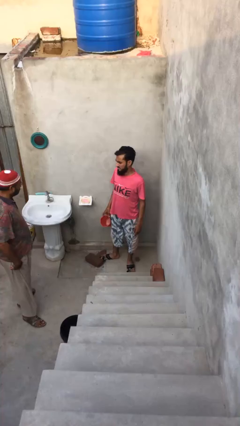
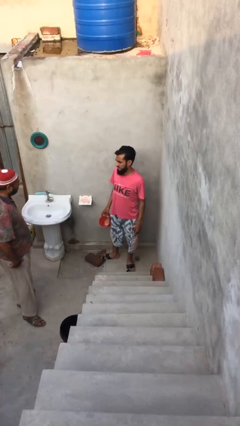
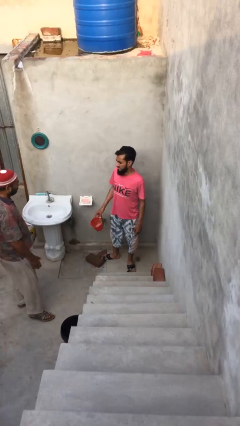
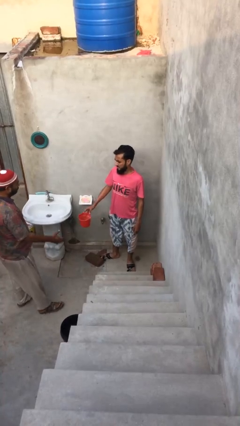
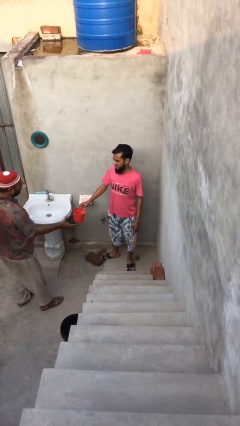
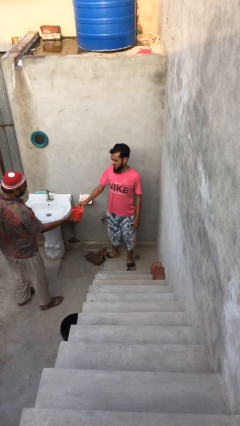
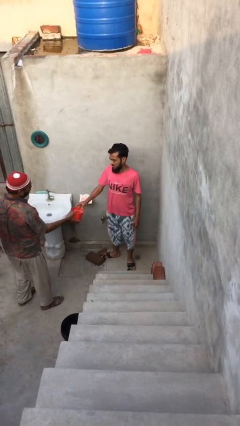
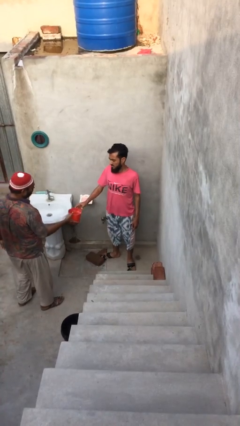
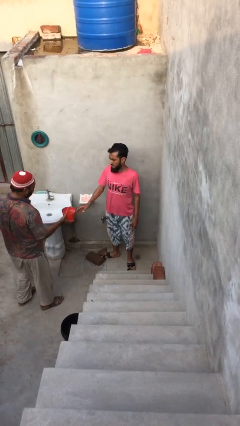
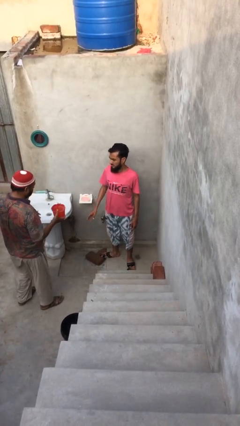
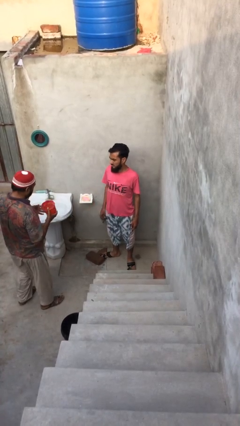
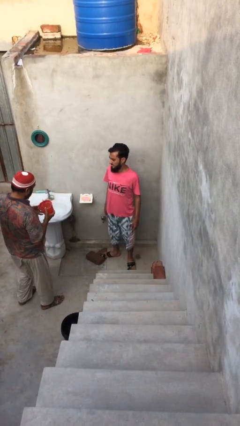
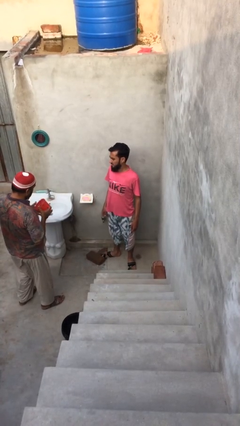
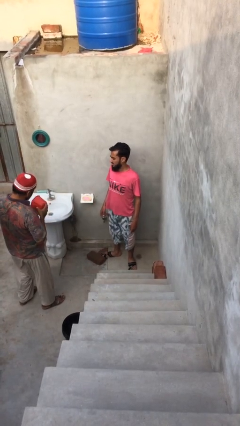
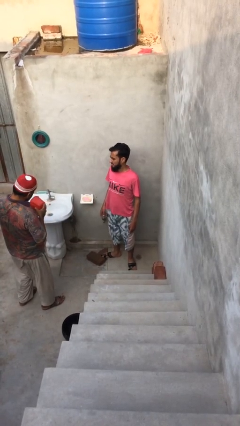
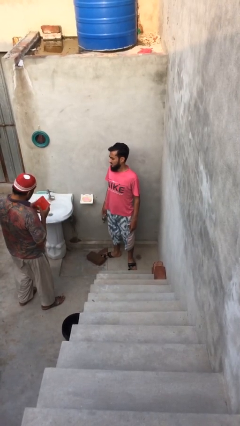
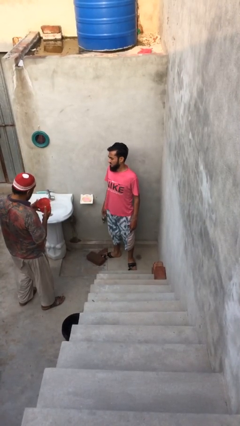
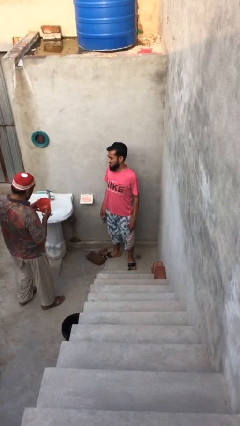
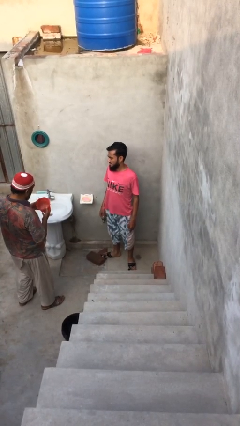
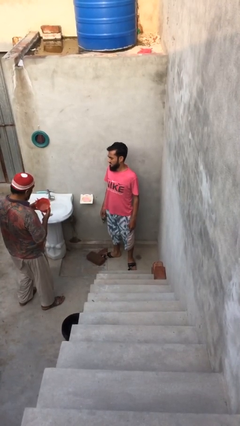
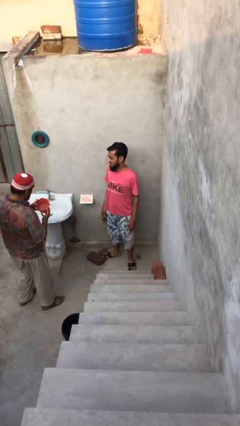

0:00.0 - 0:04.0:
person transfers object to person

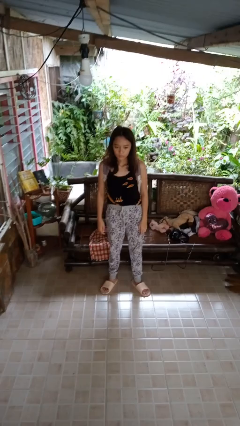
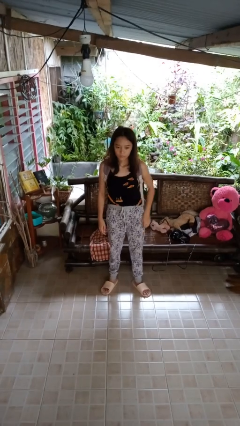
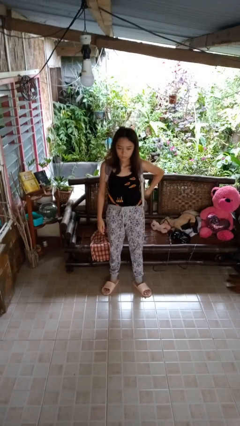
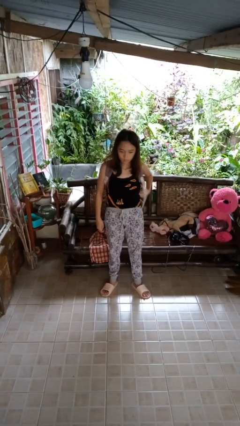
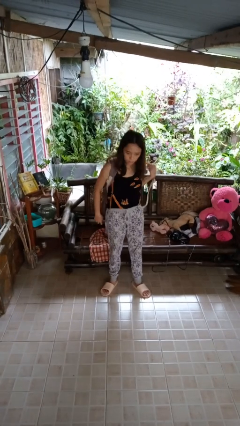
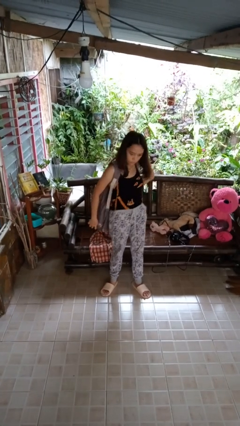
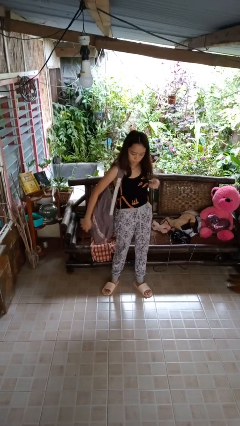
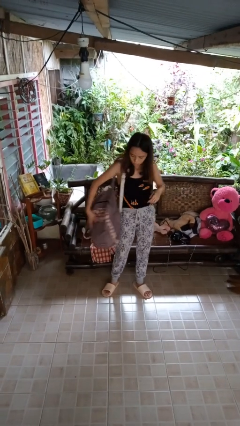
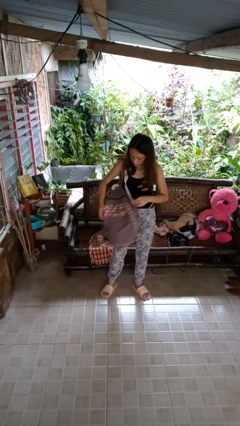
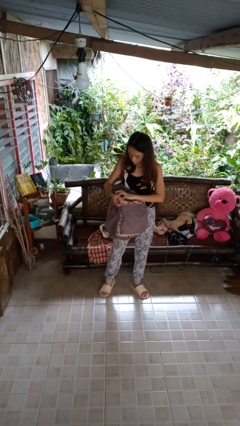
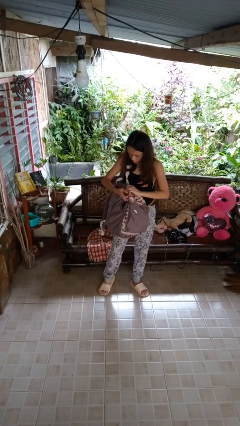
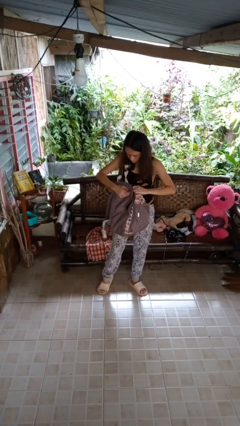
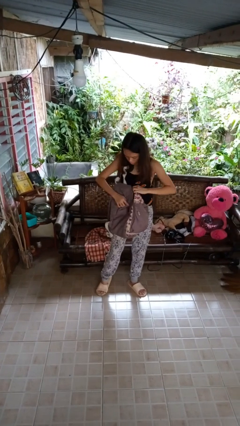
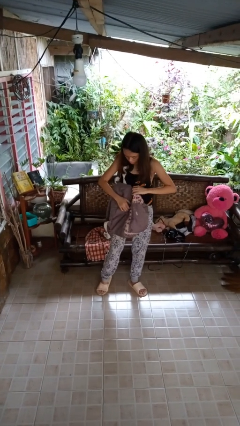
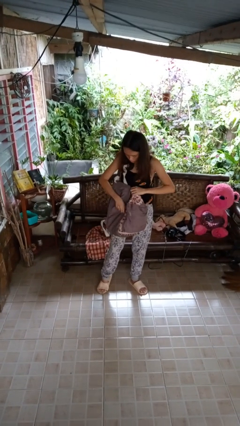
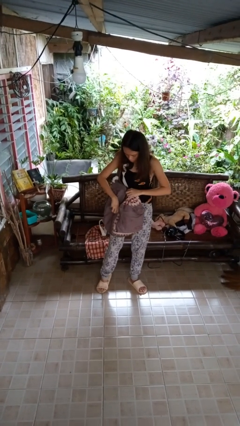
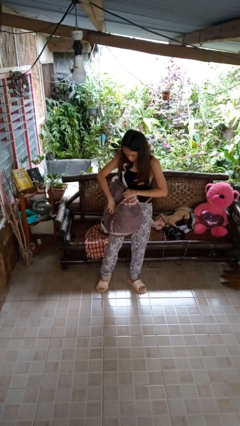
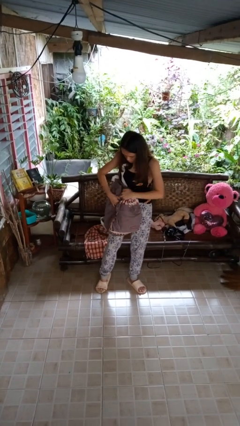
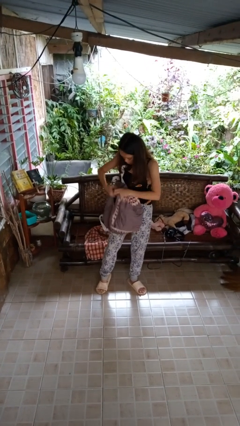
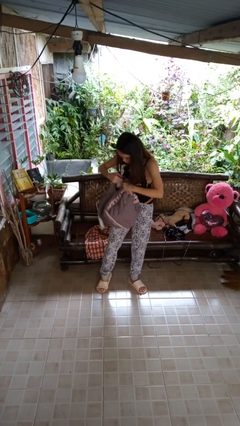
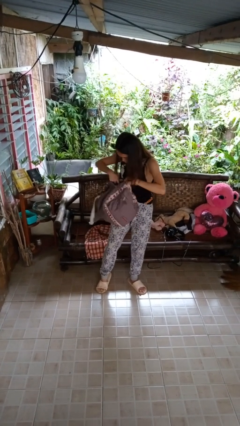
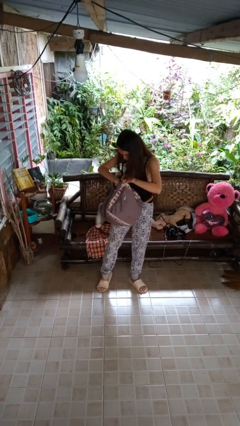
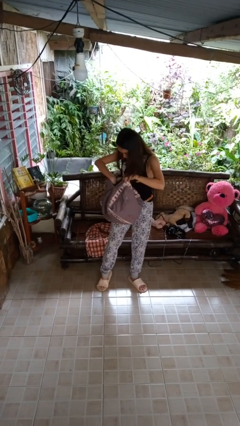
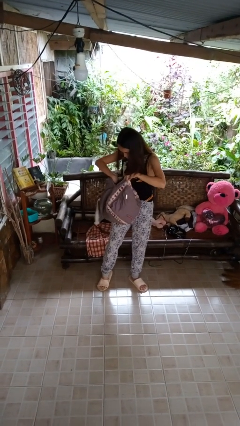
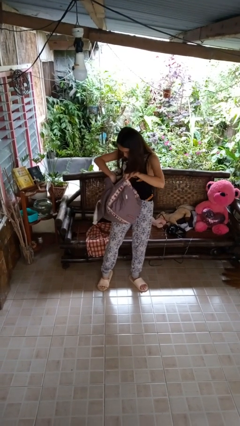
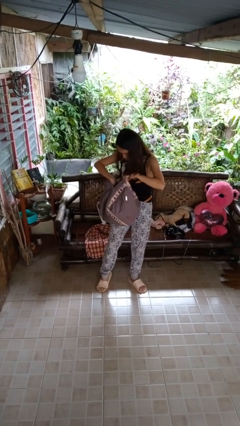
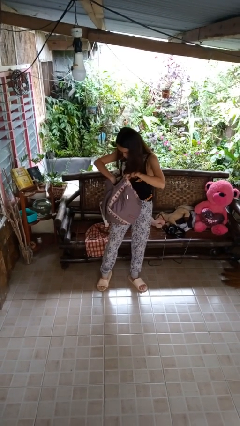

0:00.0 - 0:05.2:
person searches in backpack

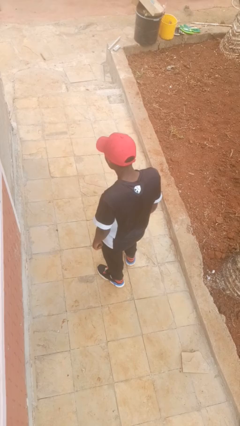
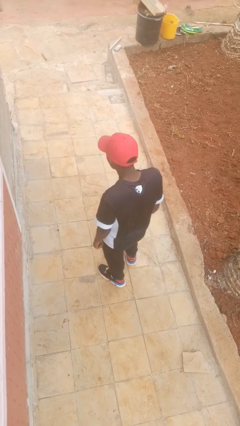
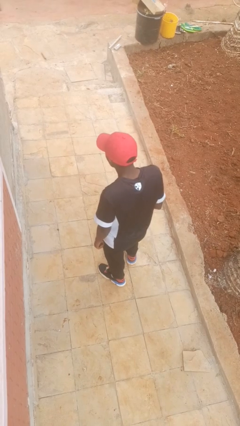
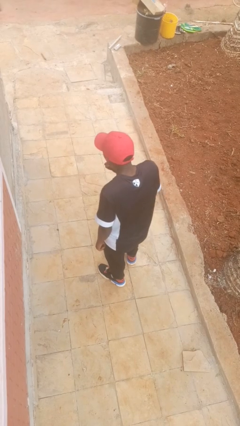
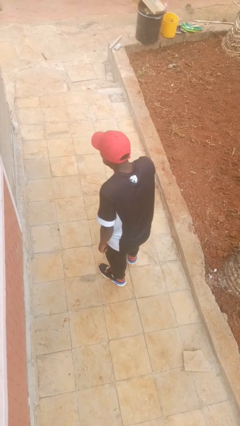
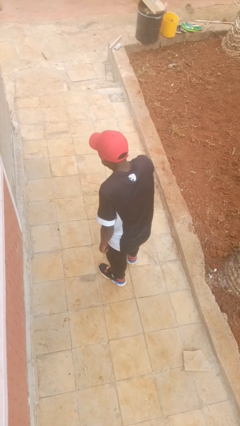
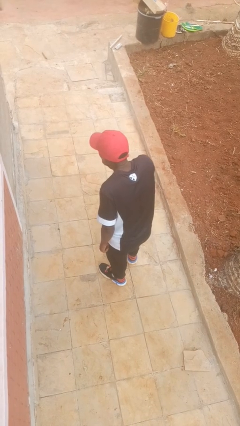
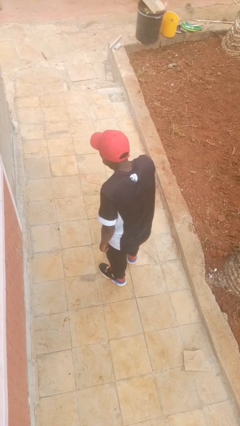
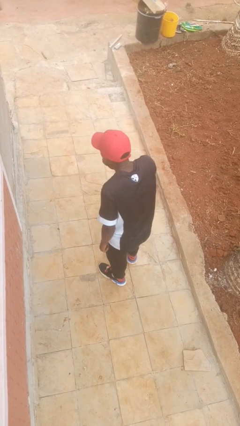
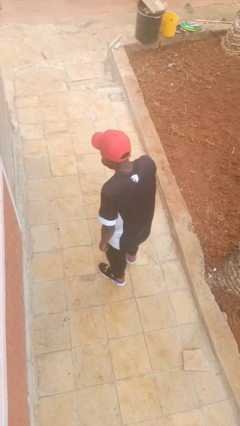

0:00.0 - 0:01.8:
person gestures be quiet

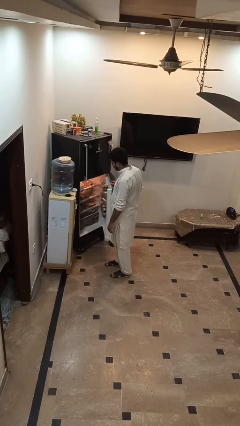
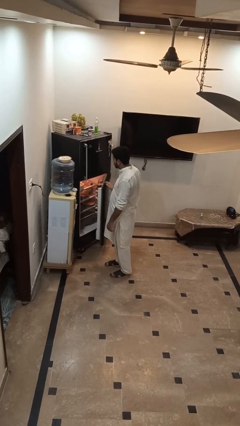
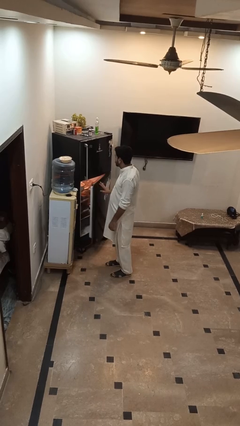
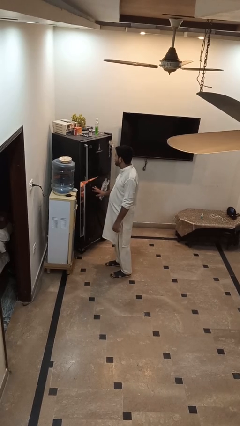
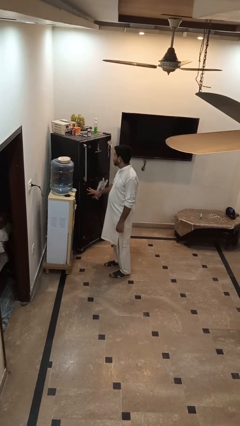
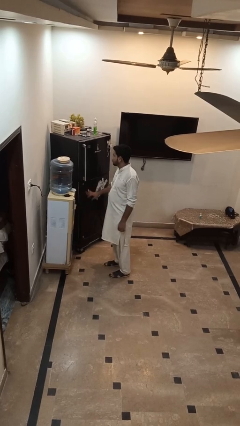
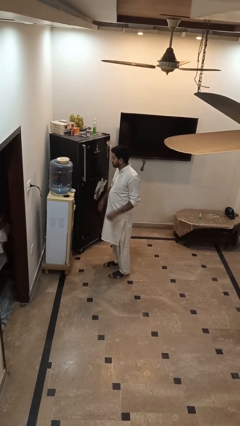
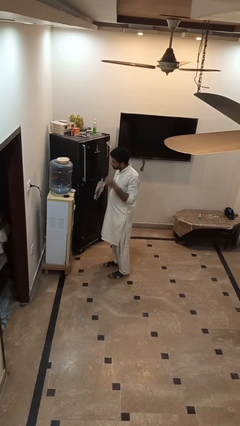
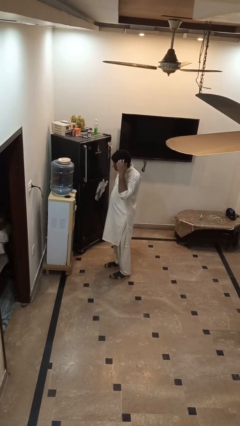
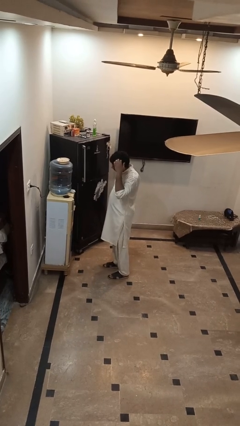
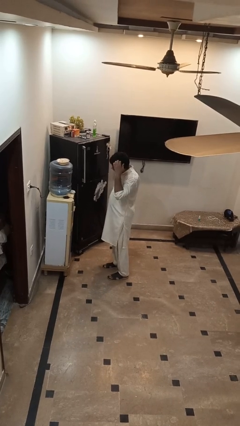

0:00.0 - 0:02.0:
person closes refrigerator

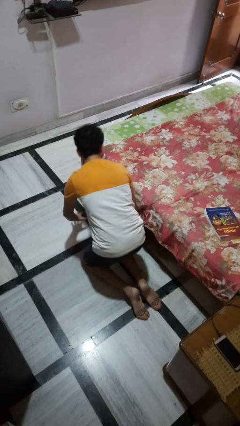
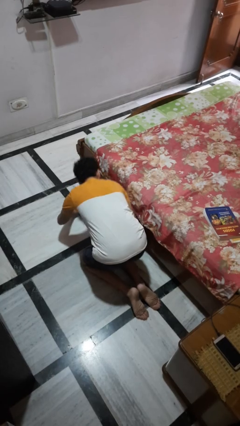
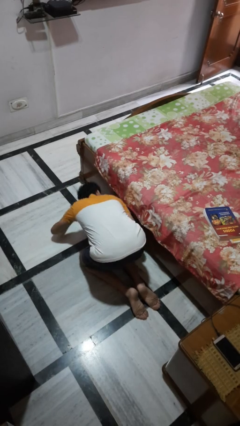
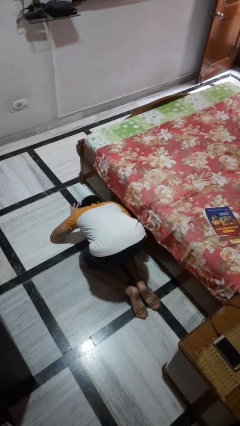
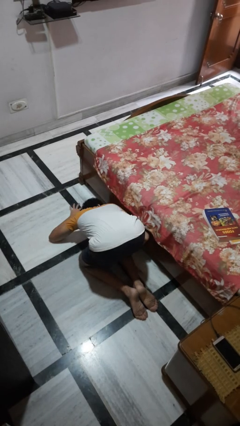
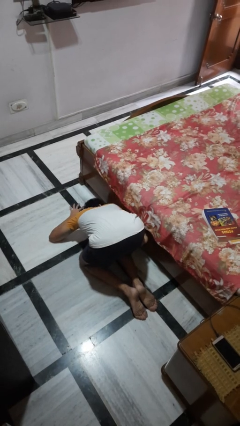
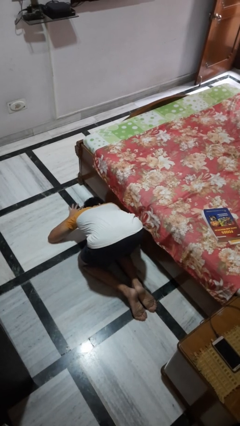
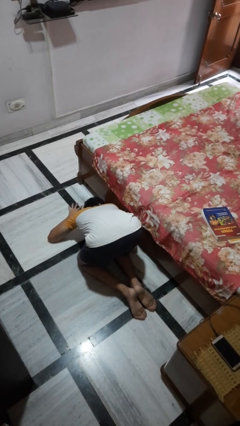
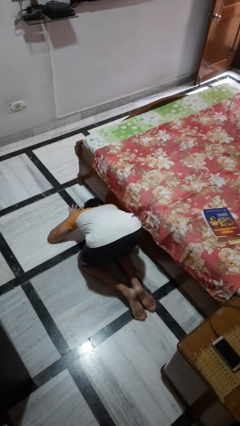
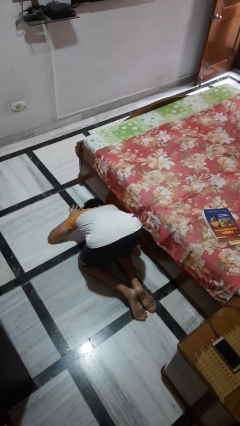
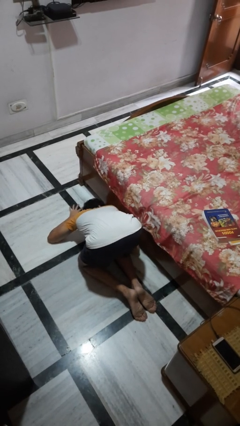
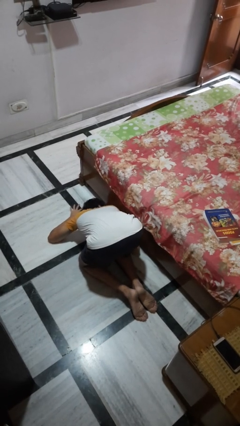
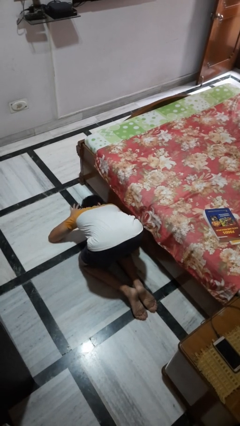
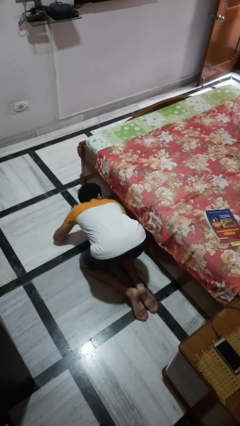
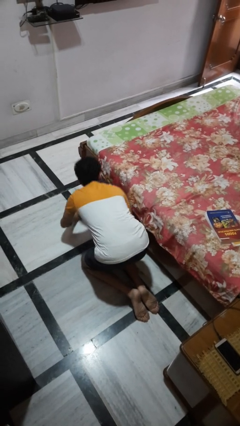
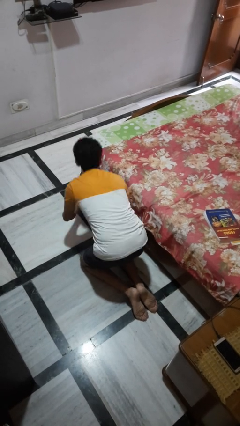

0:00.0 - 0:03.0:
person searches under bed

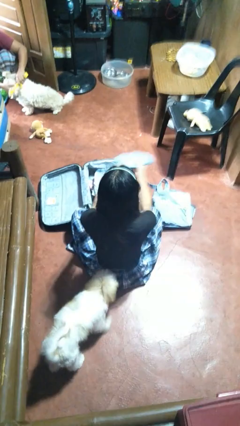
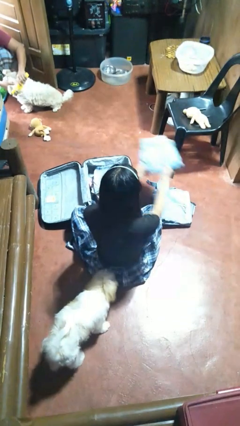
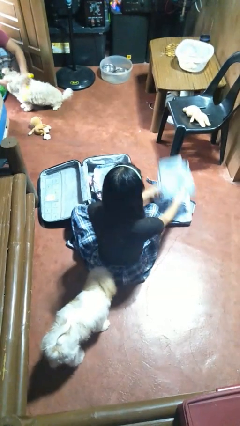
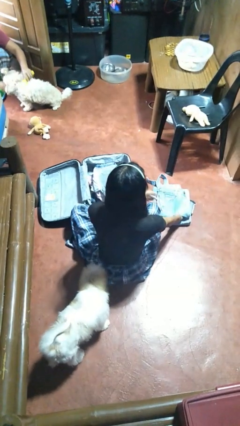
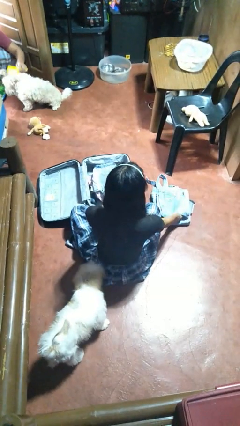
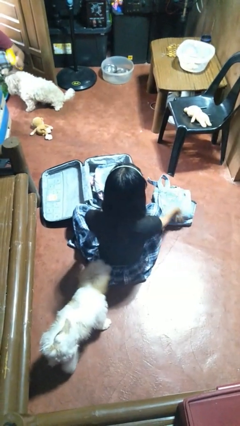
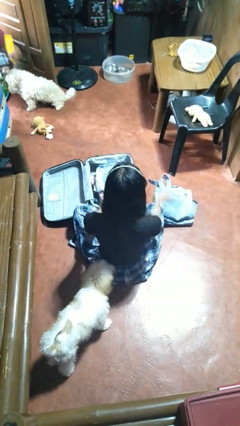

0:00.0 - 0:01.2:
person unloads clothes from suitcase
